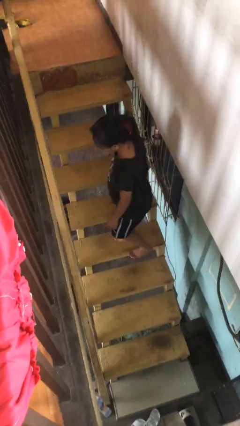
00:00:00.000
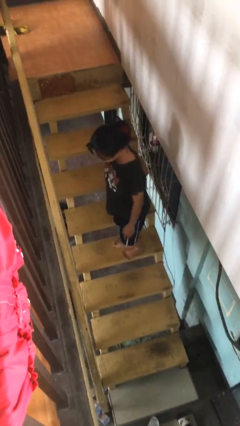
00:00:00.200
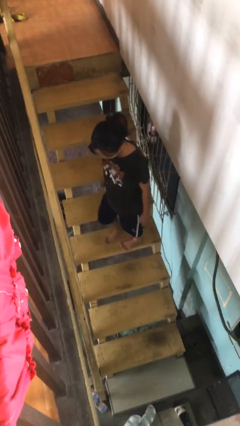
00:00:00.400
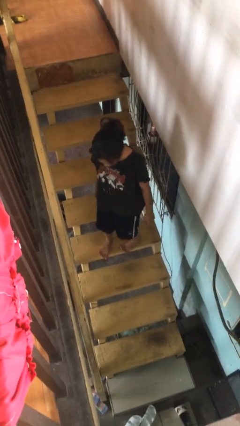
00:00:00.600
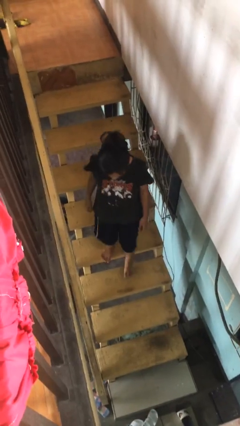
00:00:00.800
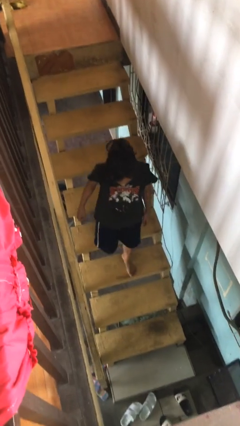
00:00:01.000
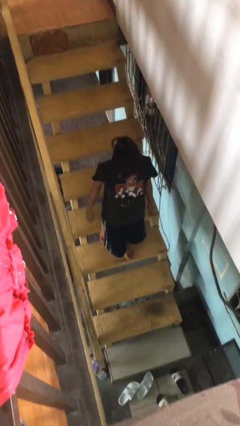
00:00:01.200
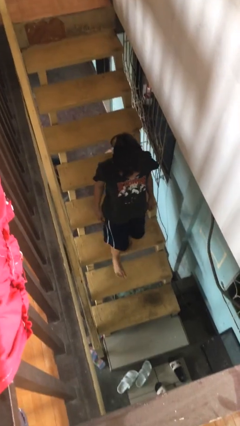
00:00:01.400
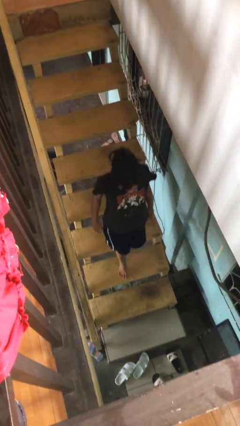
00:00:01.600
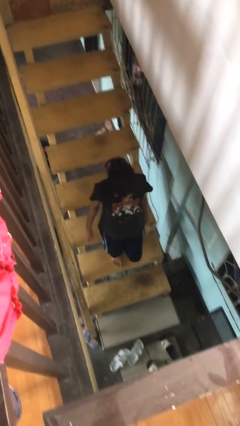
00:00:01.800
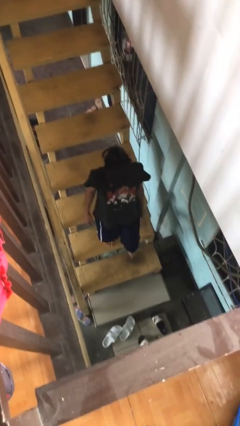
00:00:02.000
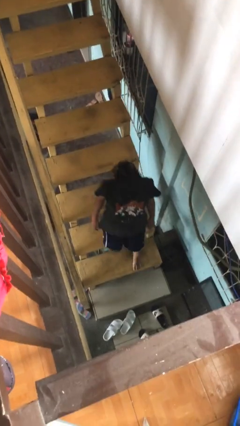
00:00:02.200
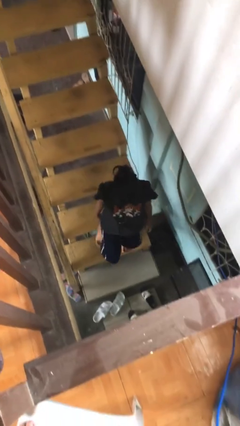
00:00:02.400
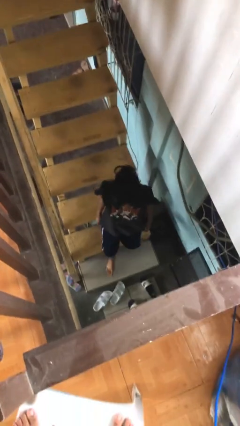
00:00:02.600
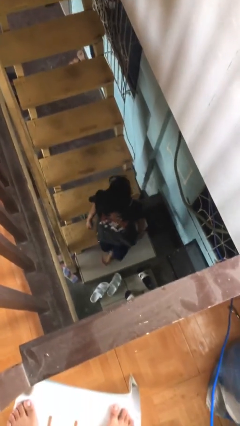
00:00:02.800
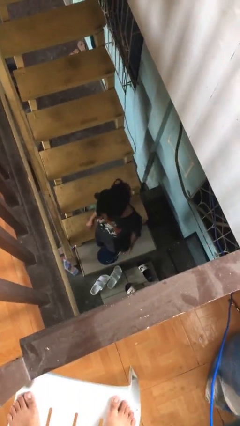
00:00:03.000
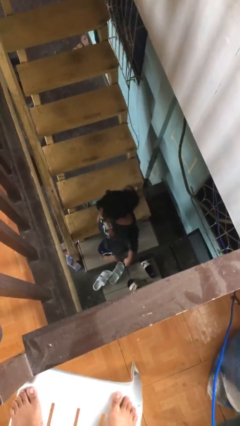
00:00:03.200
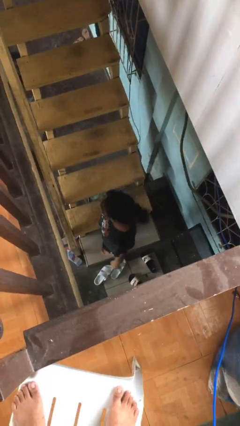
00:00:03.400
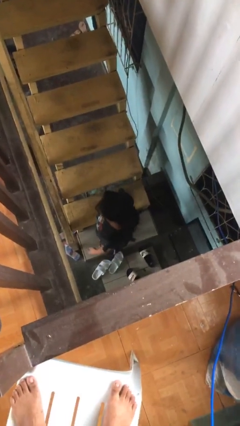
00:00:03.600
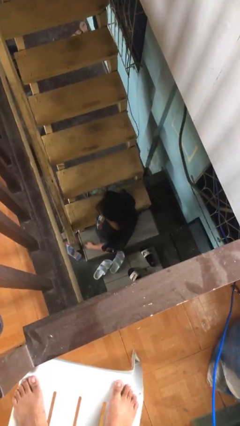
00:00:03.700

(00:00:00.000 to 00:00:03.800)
person climbs down stairs

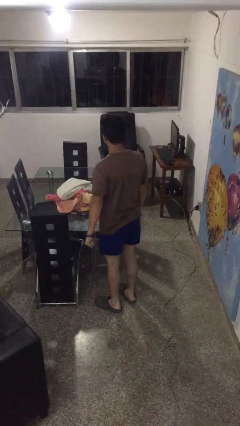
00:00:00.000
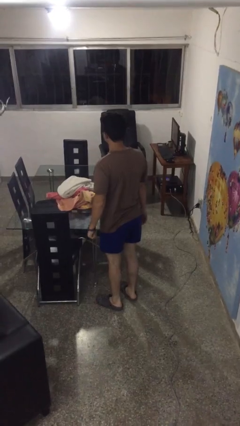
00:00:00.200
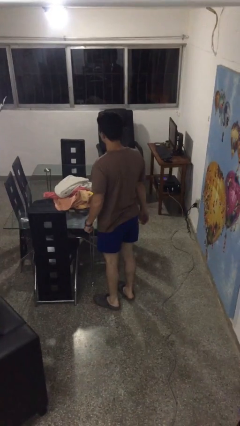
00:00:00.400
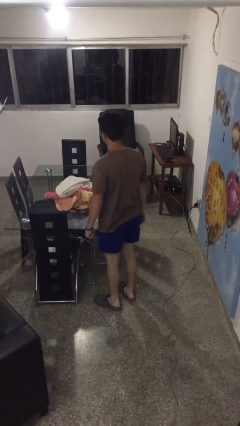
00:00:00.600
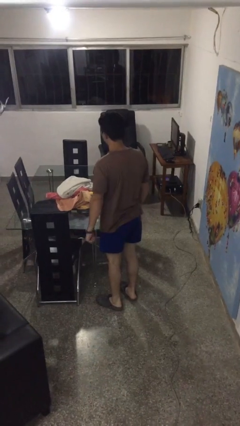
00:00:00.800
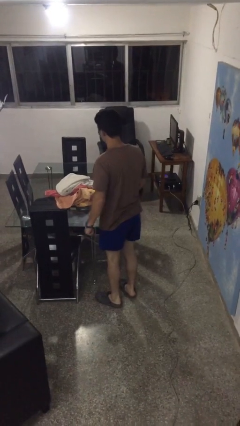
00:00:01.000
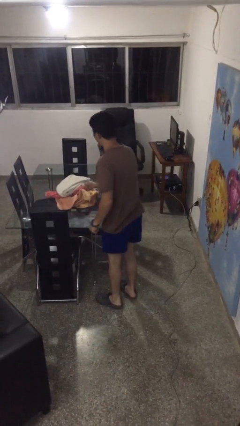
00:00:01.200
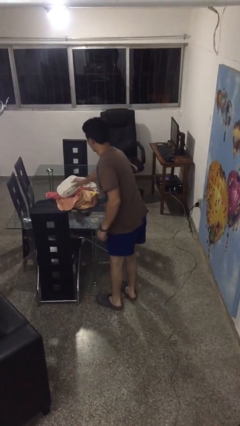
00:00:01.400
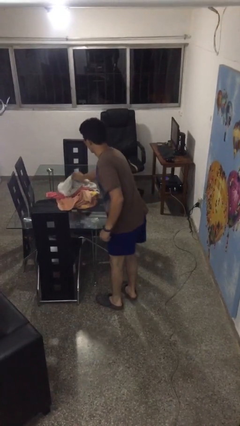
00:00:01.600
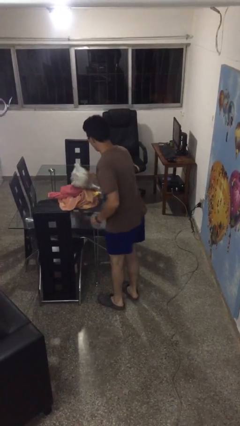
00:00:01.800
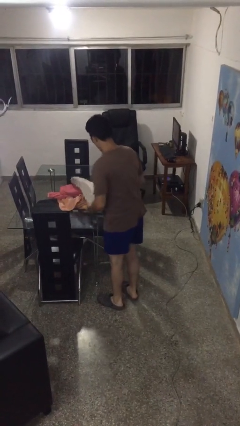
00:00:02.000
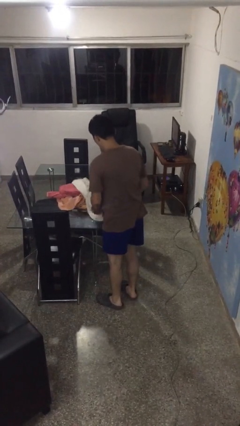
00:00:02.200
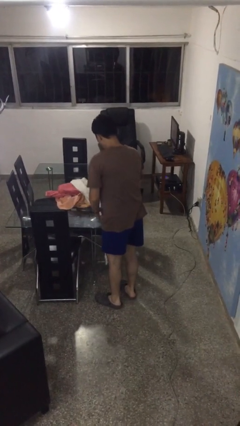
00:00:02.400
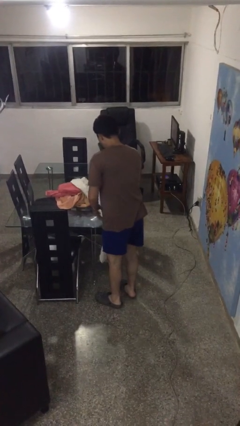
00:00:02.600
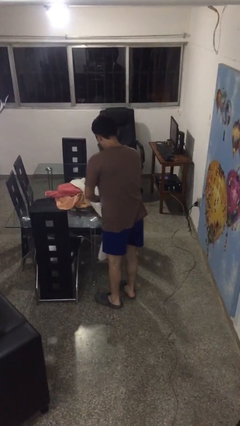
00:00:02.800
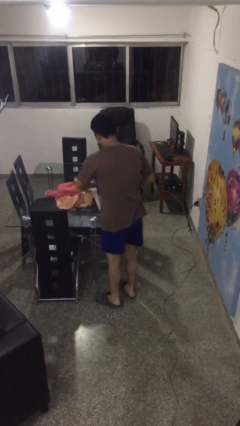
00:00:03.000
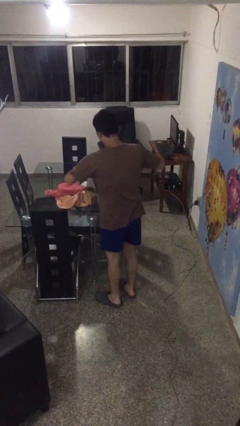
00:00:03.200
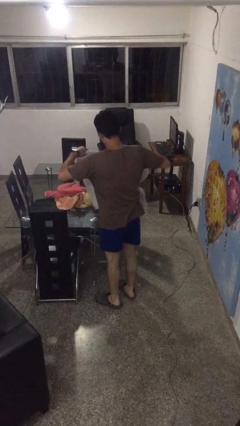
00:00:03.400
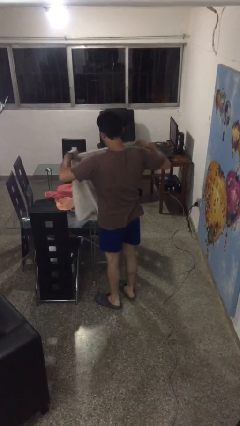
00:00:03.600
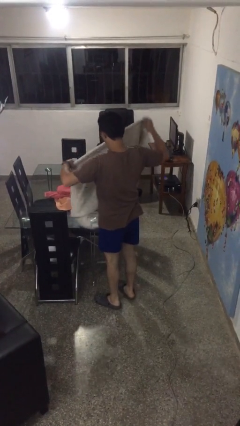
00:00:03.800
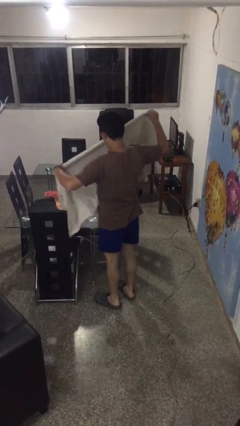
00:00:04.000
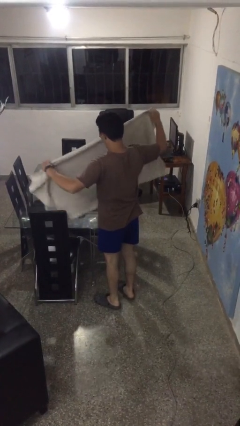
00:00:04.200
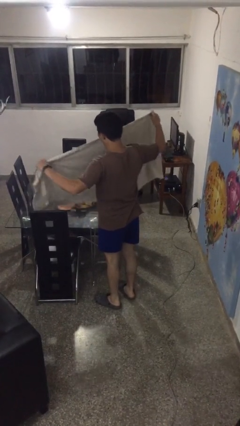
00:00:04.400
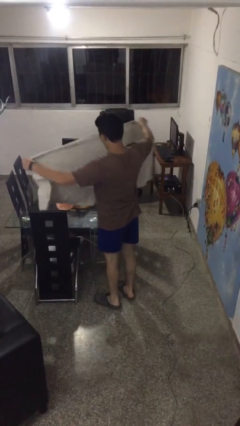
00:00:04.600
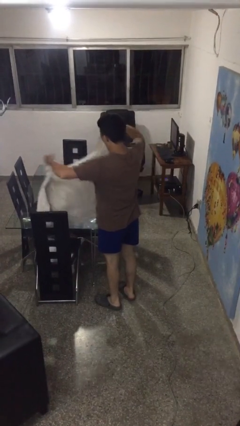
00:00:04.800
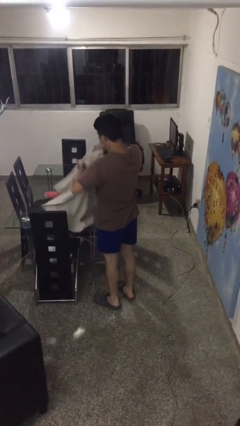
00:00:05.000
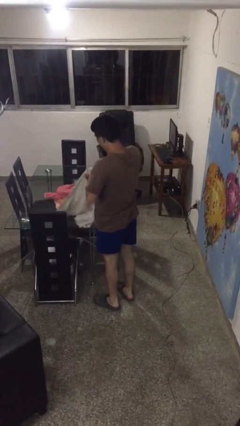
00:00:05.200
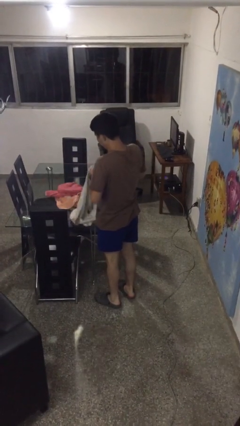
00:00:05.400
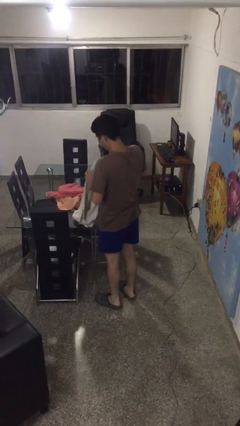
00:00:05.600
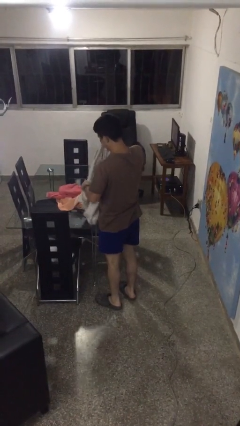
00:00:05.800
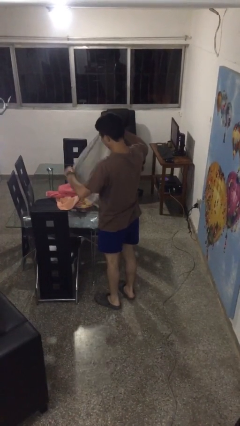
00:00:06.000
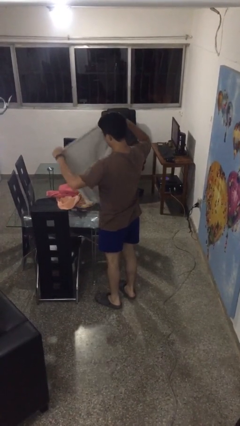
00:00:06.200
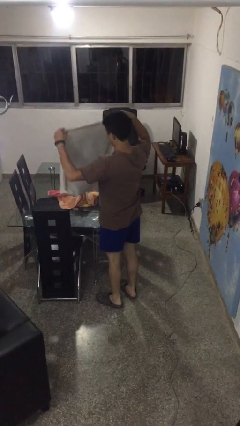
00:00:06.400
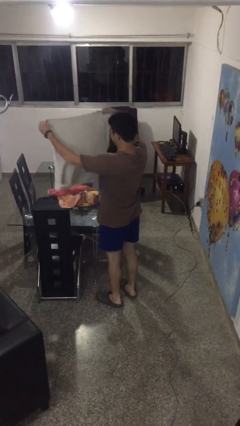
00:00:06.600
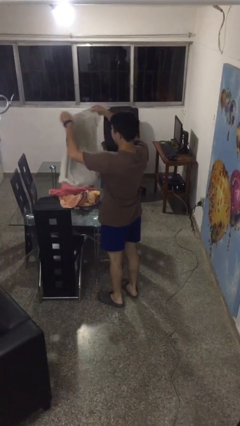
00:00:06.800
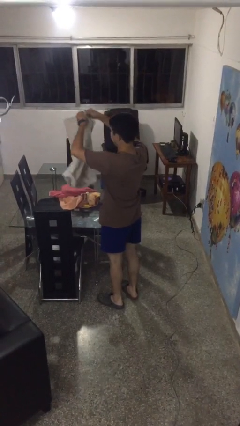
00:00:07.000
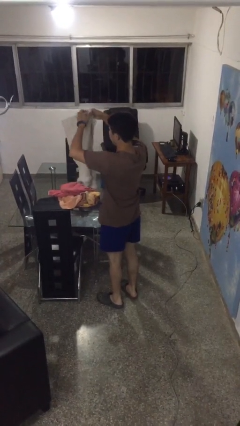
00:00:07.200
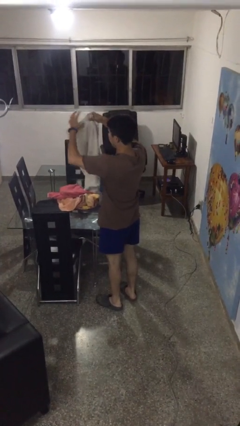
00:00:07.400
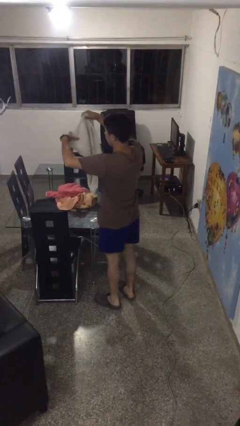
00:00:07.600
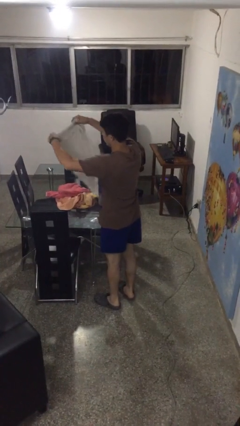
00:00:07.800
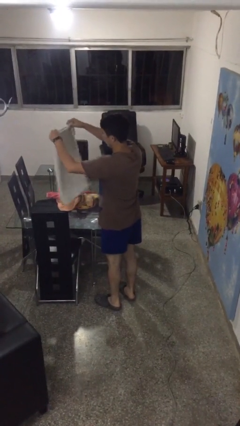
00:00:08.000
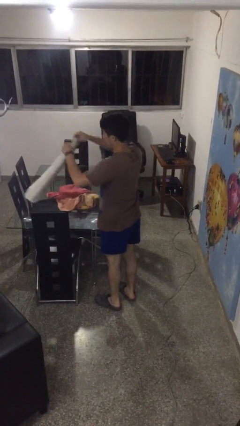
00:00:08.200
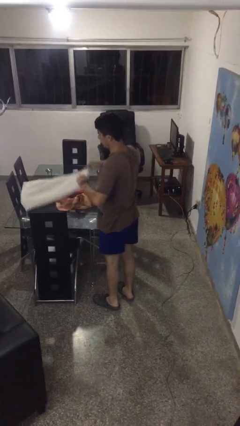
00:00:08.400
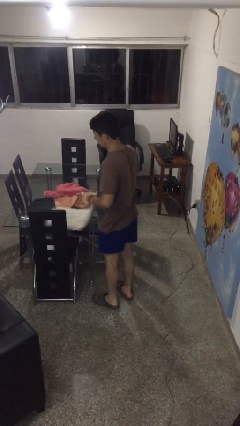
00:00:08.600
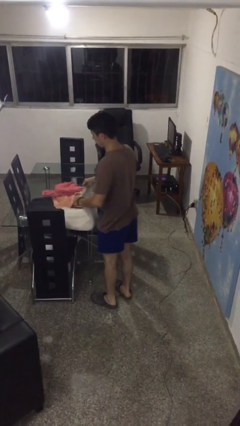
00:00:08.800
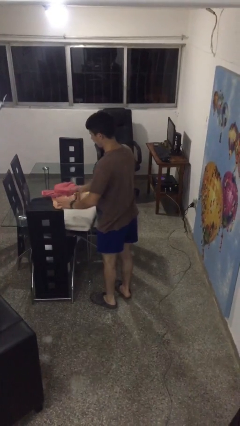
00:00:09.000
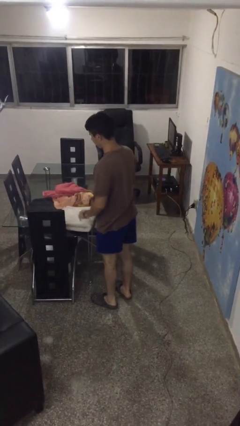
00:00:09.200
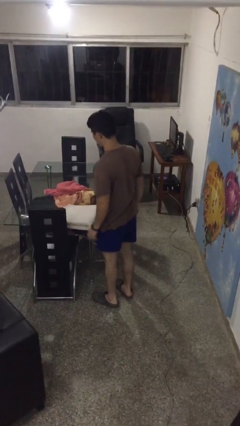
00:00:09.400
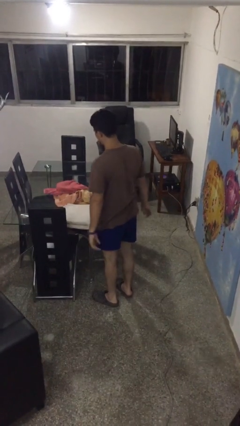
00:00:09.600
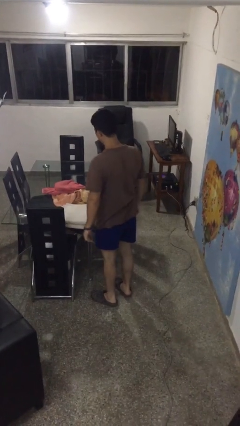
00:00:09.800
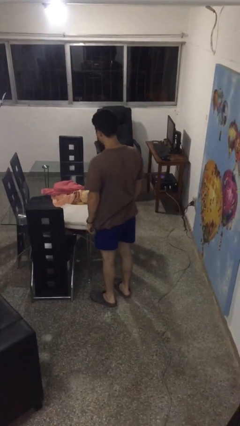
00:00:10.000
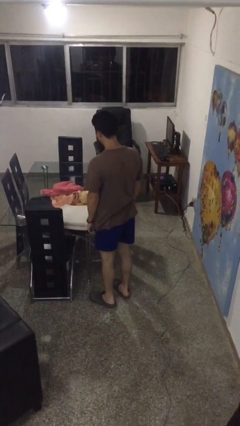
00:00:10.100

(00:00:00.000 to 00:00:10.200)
person folds towel

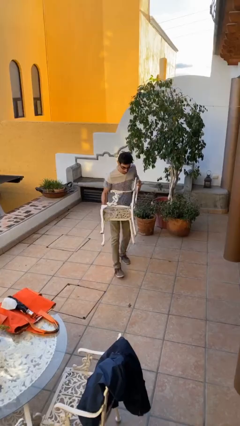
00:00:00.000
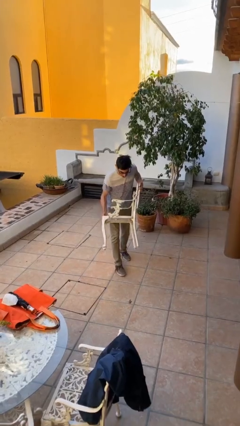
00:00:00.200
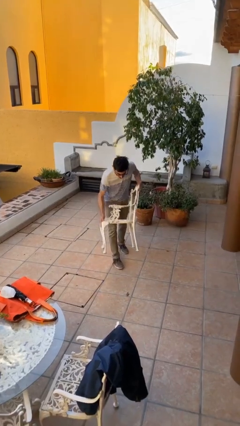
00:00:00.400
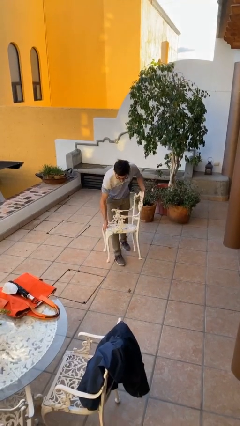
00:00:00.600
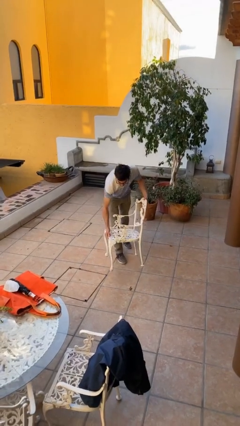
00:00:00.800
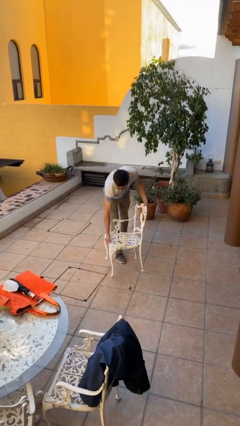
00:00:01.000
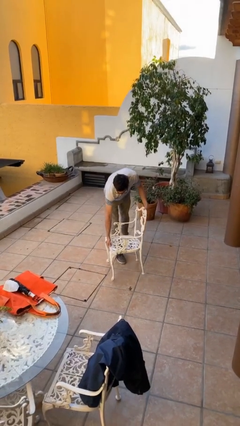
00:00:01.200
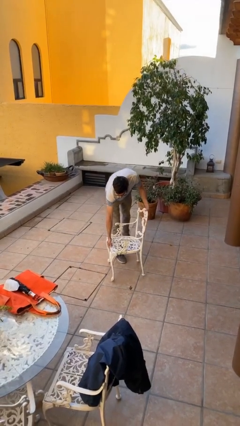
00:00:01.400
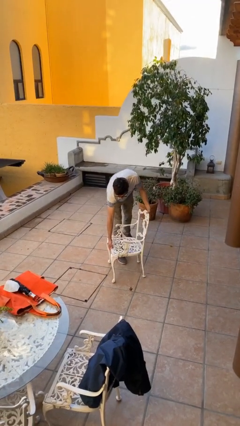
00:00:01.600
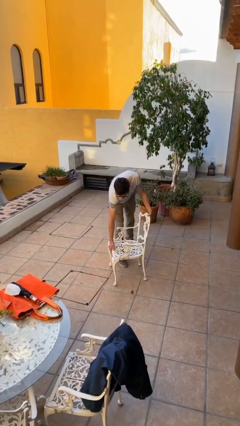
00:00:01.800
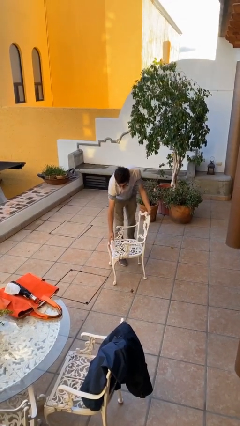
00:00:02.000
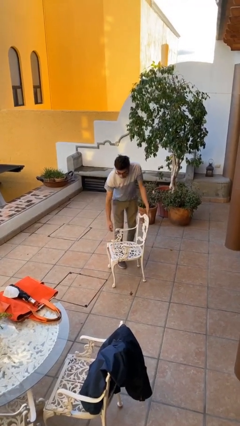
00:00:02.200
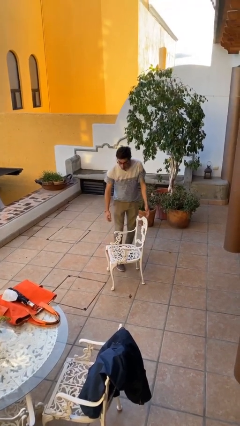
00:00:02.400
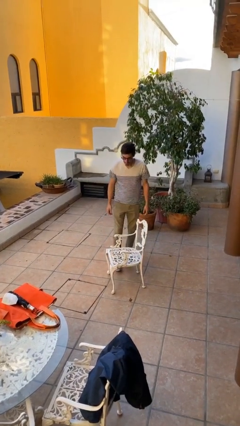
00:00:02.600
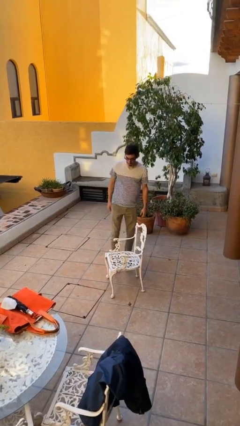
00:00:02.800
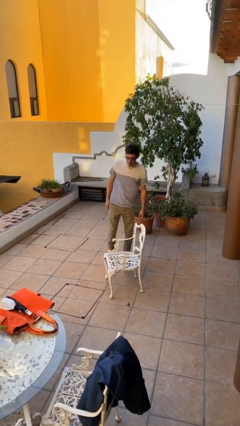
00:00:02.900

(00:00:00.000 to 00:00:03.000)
person puts down object on floor

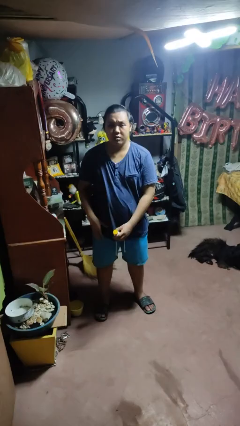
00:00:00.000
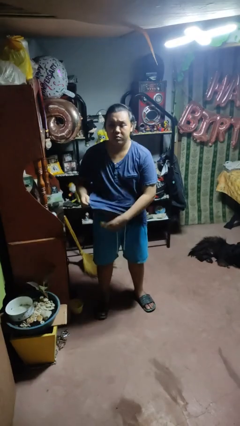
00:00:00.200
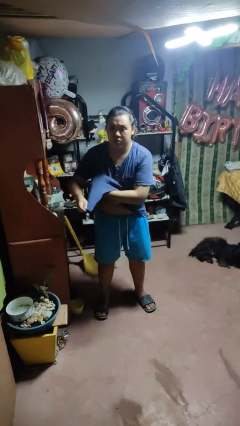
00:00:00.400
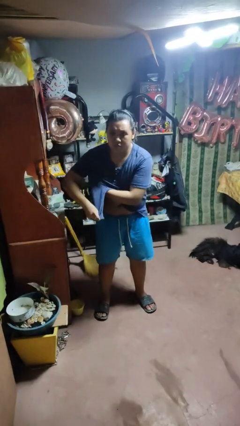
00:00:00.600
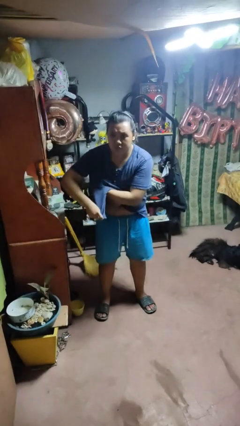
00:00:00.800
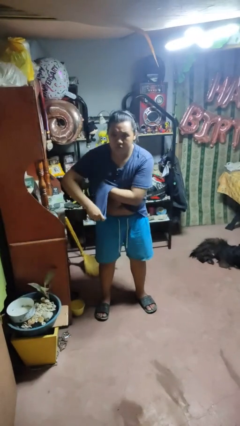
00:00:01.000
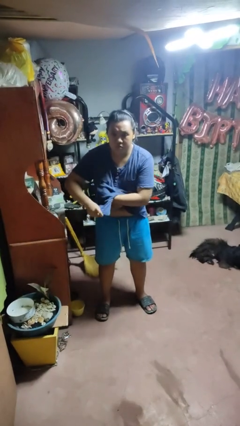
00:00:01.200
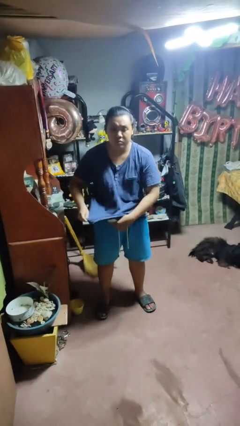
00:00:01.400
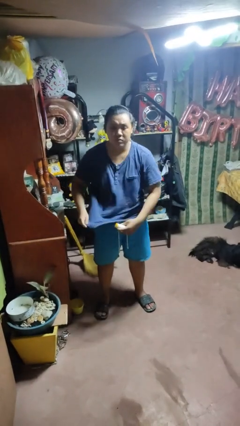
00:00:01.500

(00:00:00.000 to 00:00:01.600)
person applies deodorant
